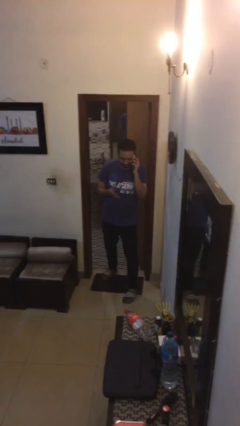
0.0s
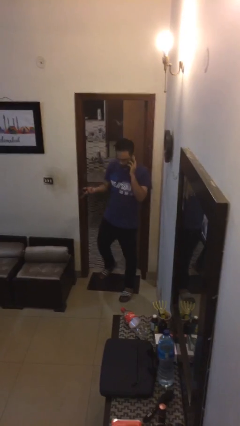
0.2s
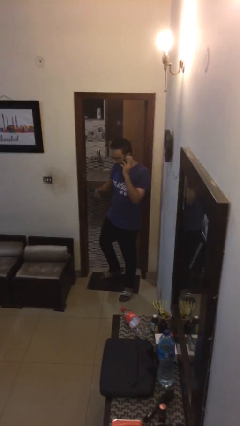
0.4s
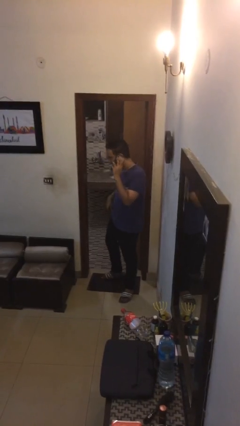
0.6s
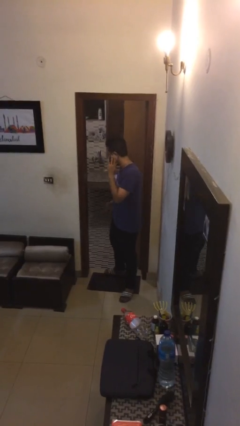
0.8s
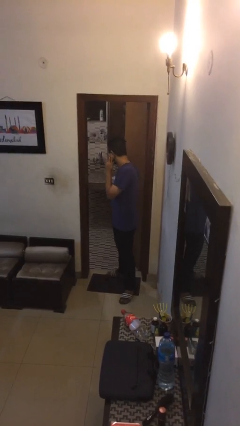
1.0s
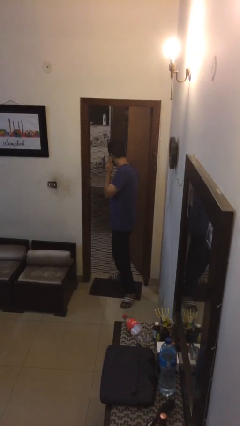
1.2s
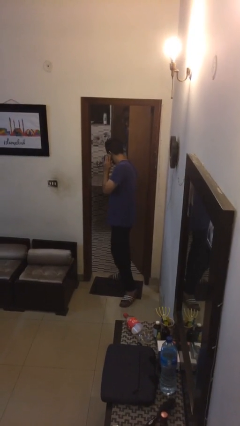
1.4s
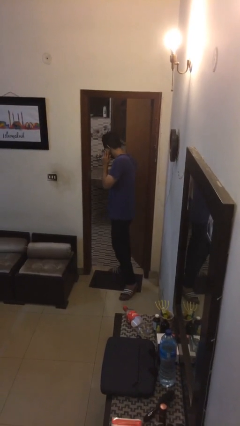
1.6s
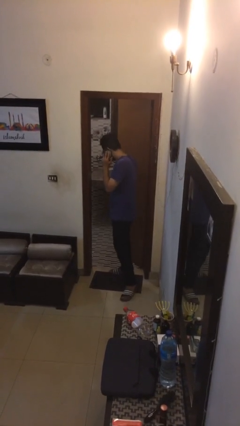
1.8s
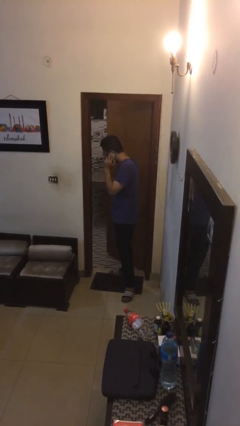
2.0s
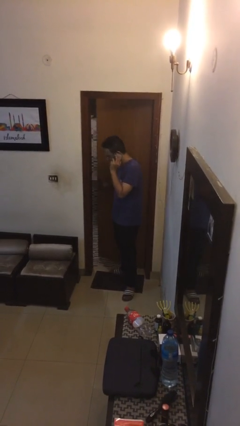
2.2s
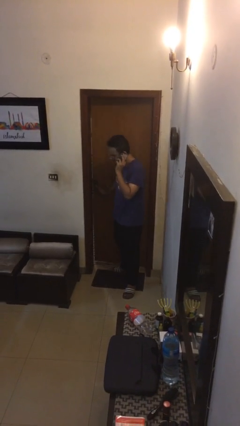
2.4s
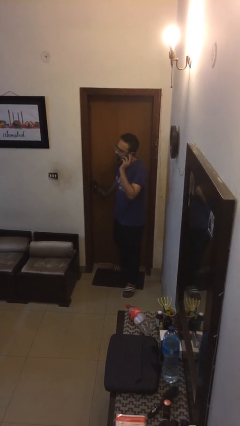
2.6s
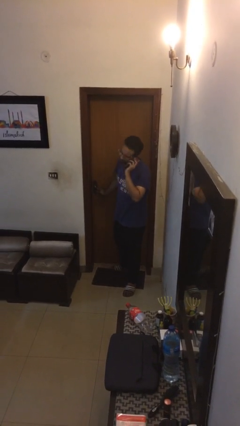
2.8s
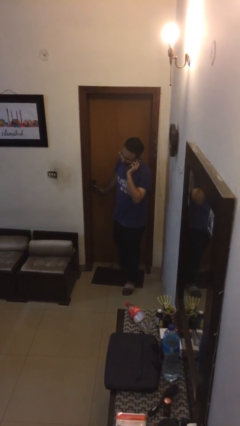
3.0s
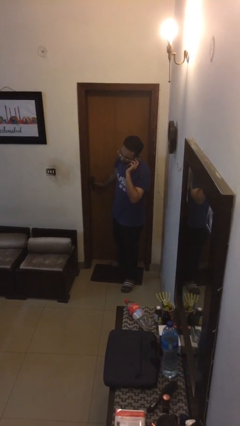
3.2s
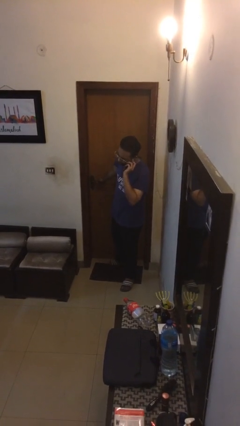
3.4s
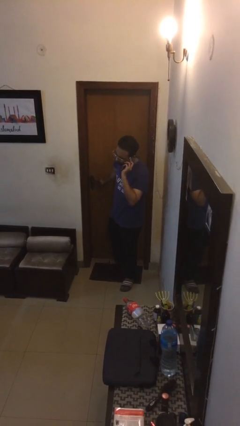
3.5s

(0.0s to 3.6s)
person closes facility door

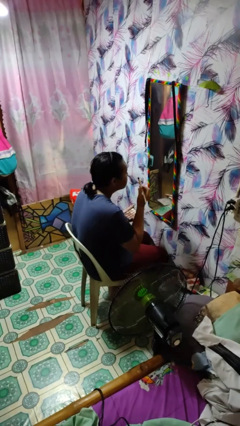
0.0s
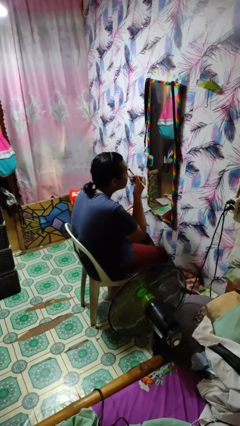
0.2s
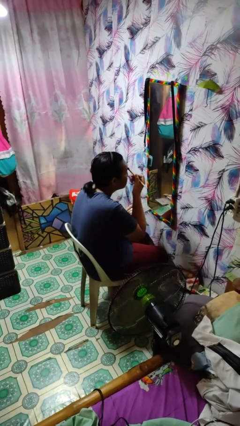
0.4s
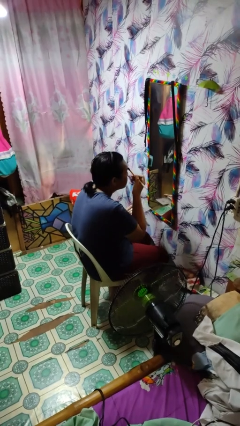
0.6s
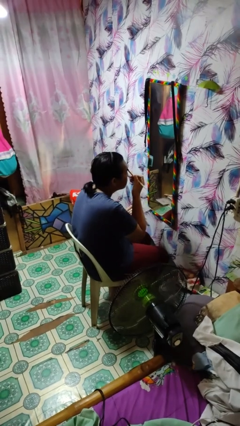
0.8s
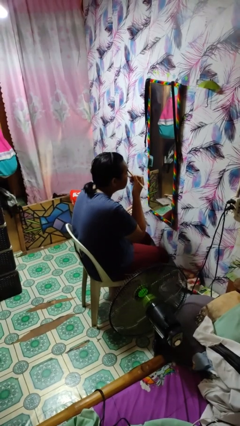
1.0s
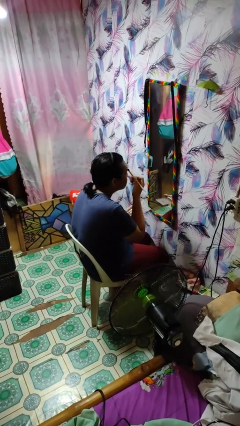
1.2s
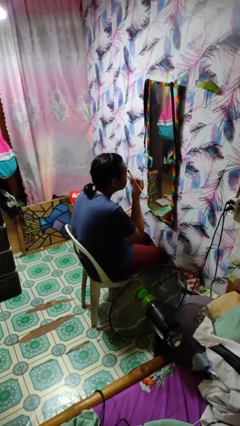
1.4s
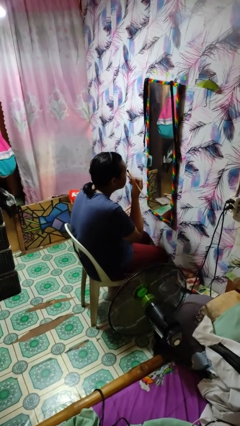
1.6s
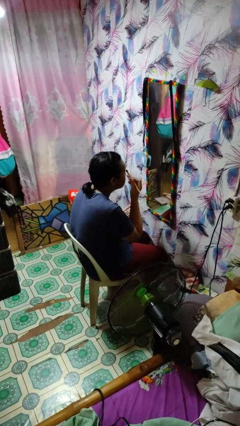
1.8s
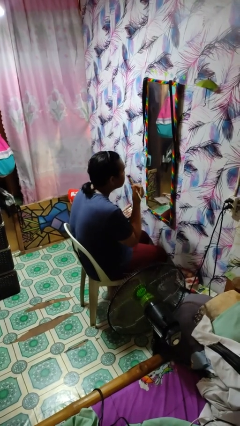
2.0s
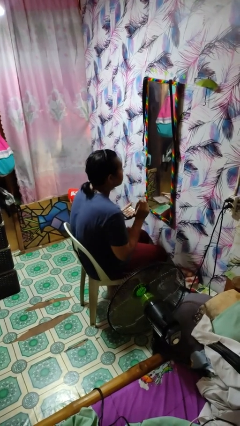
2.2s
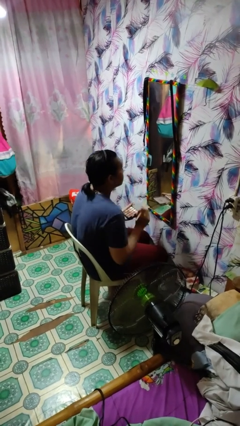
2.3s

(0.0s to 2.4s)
person applies eye makeup

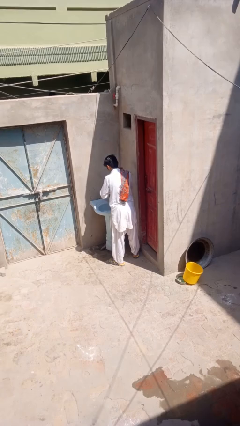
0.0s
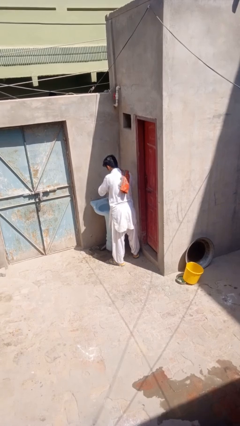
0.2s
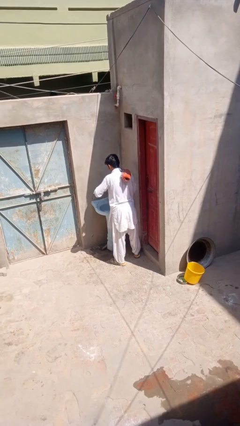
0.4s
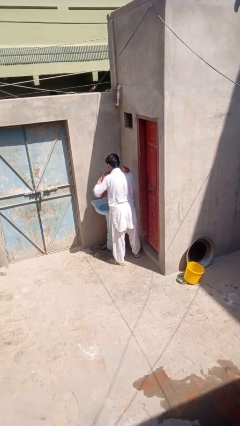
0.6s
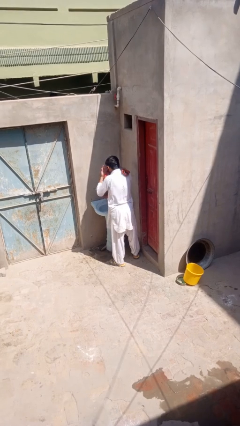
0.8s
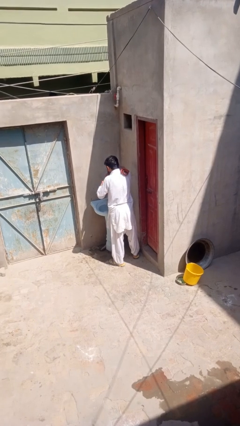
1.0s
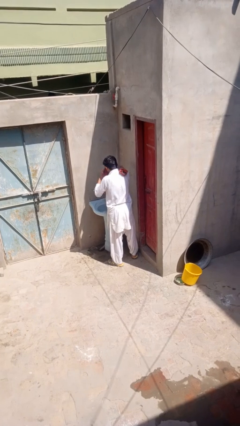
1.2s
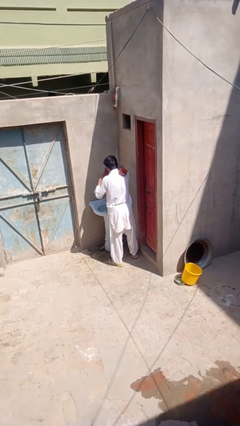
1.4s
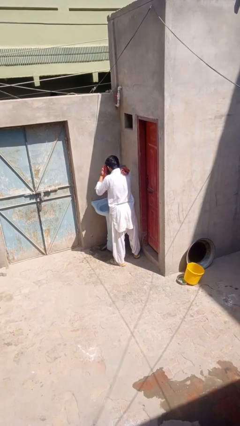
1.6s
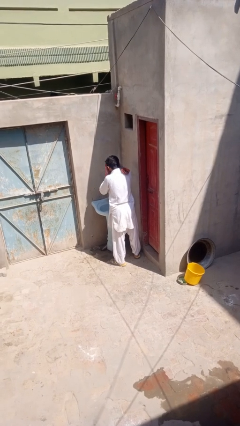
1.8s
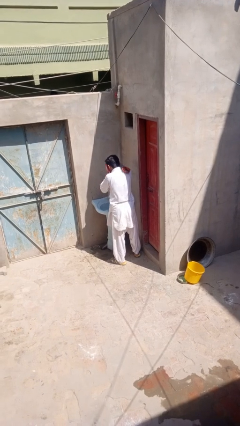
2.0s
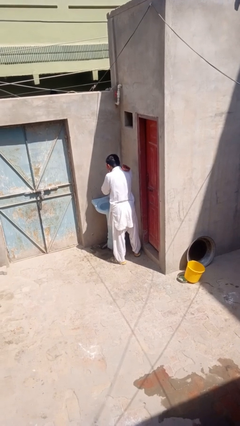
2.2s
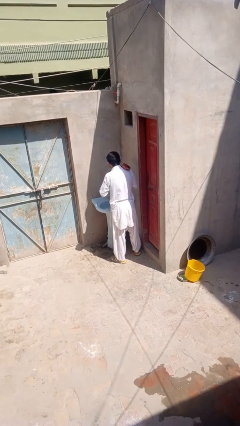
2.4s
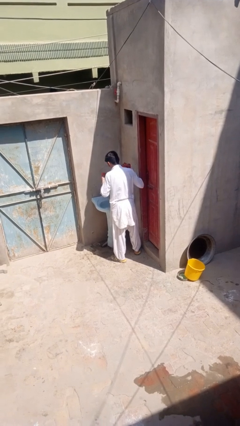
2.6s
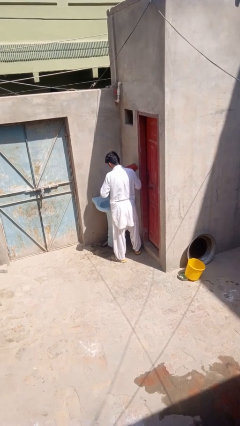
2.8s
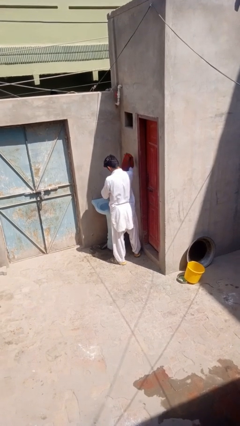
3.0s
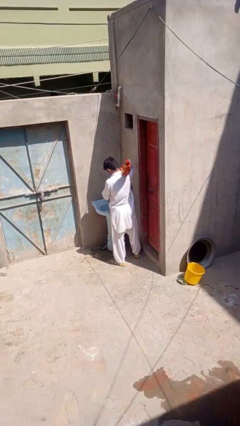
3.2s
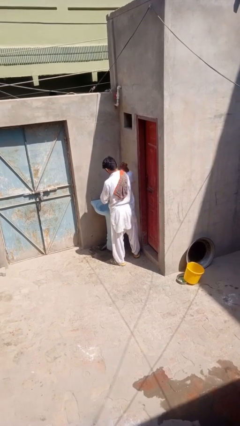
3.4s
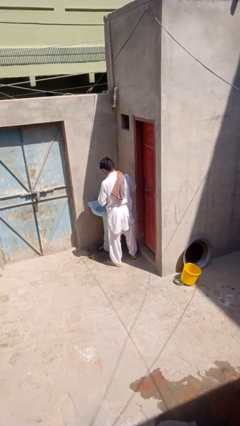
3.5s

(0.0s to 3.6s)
person dries face with towel

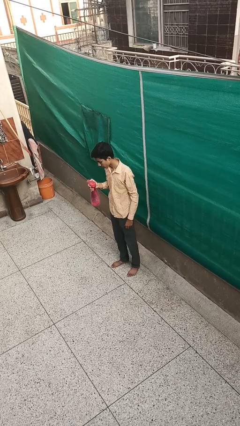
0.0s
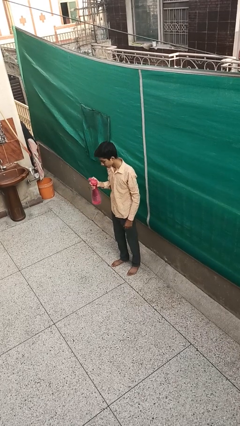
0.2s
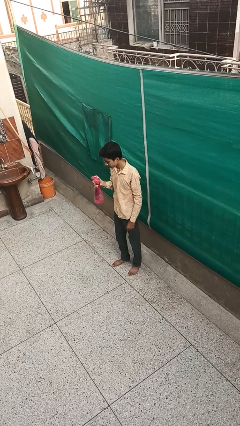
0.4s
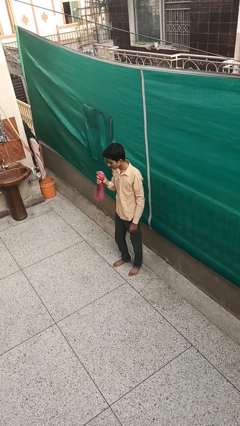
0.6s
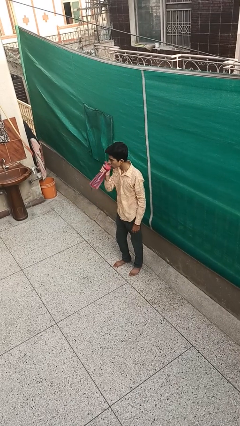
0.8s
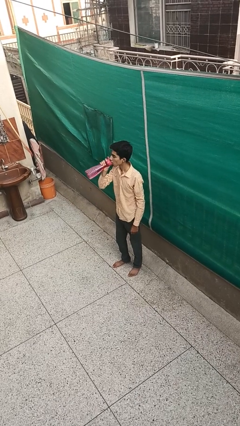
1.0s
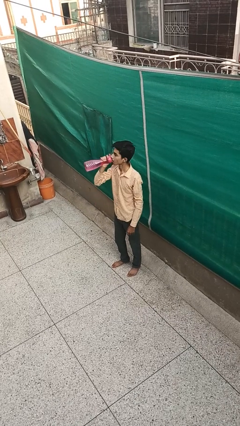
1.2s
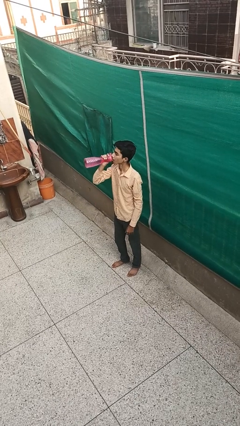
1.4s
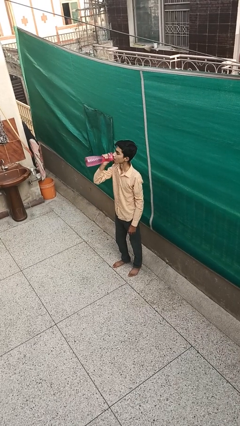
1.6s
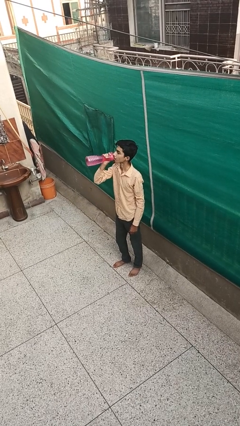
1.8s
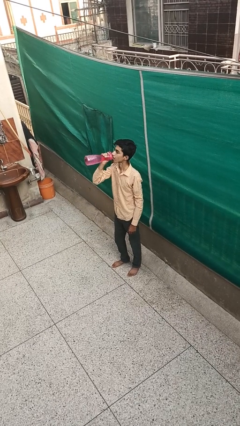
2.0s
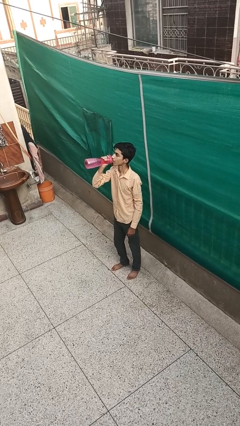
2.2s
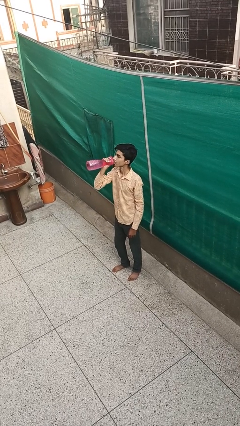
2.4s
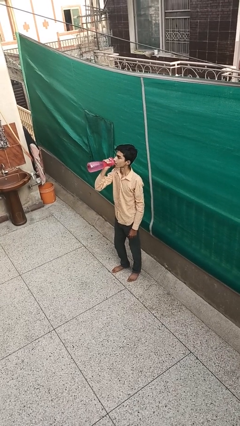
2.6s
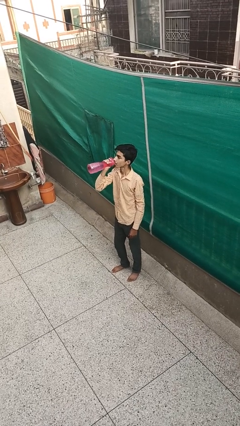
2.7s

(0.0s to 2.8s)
person drinks from bottle

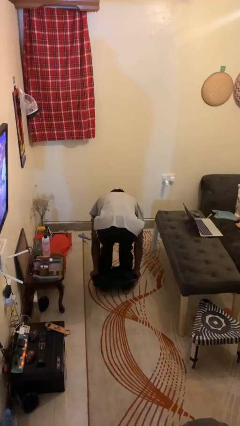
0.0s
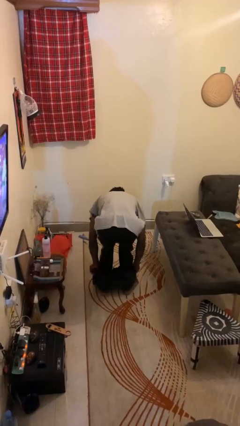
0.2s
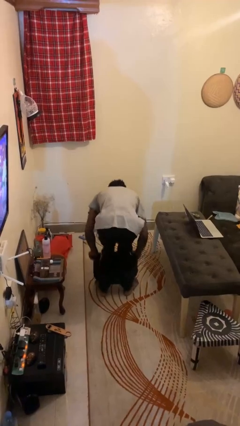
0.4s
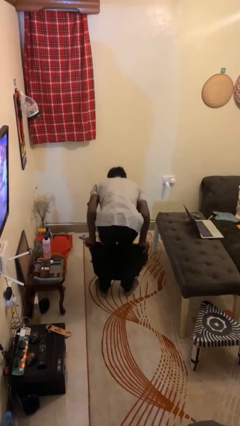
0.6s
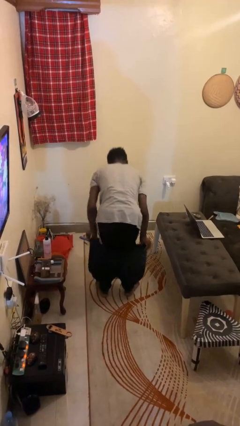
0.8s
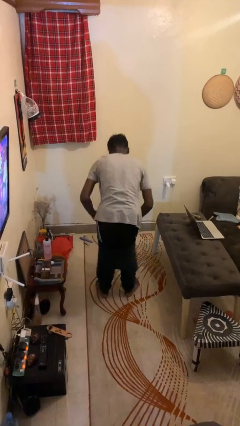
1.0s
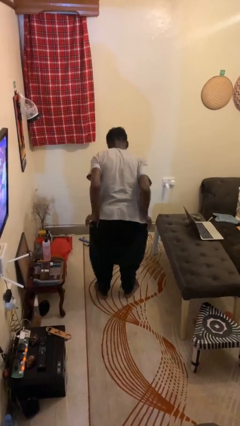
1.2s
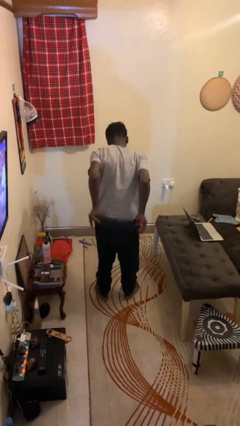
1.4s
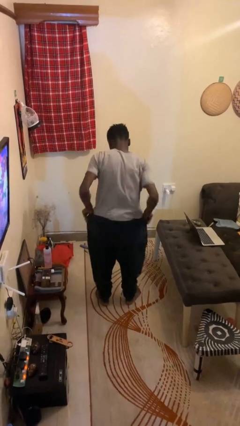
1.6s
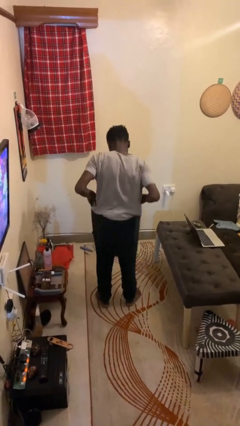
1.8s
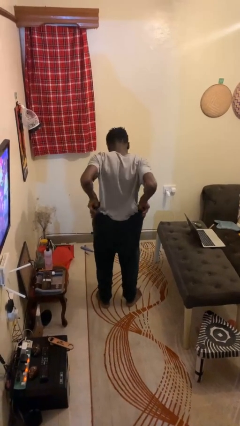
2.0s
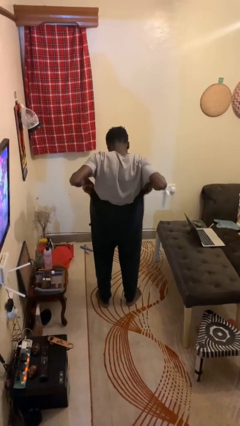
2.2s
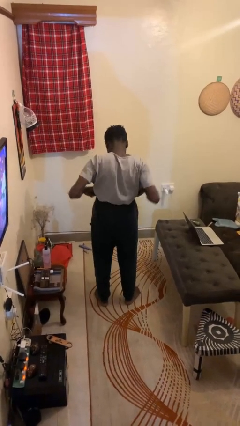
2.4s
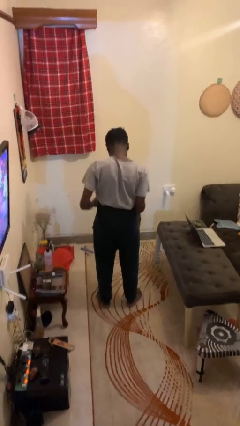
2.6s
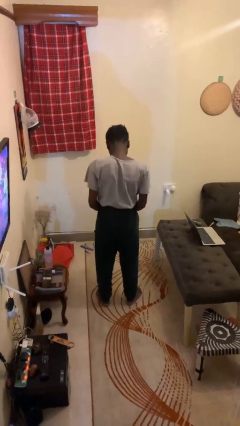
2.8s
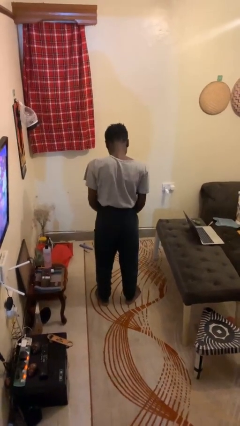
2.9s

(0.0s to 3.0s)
person puts on pants

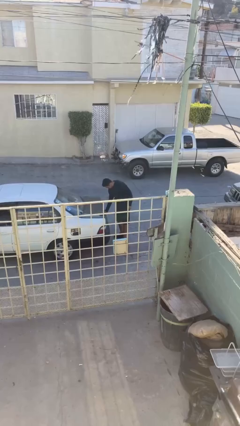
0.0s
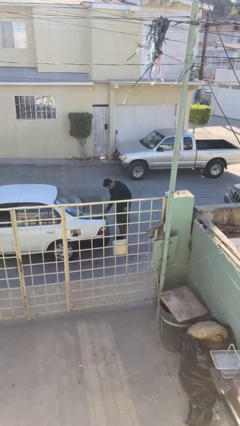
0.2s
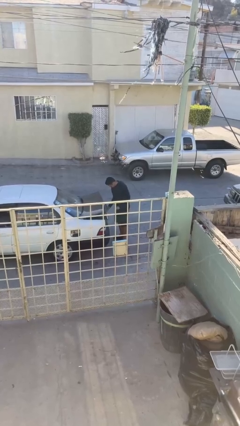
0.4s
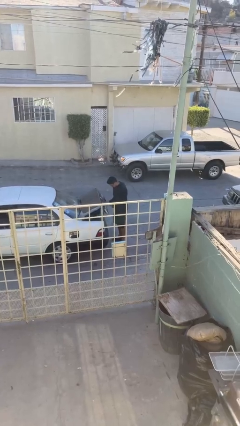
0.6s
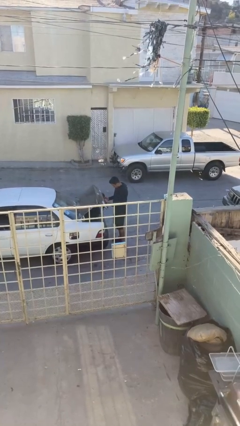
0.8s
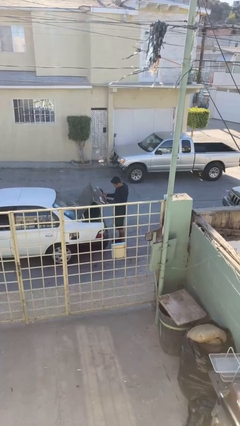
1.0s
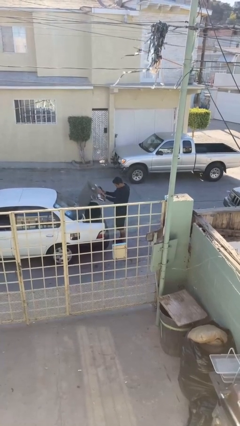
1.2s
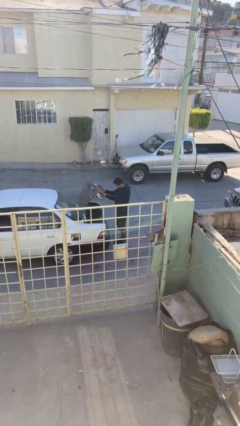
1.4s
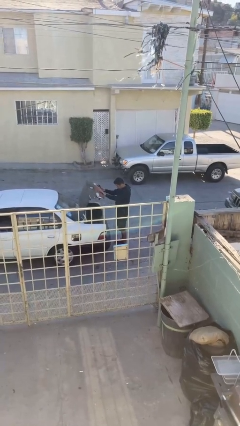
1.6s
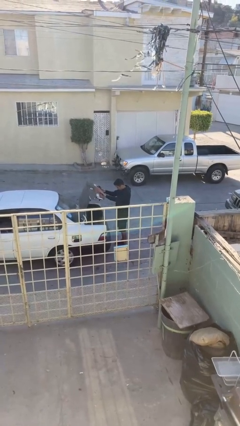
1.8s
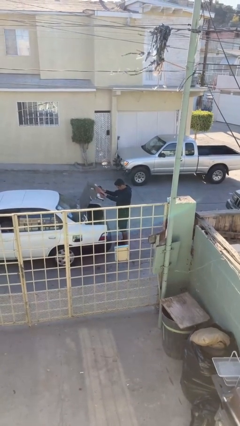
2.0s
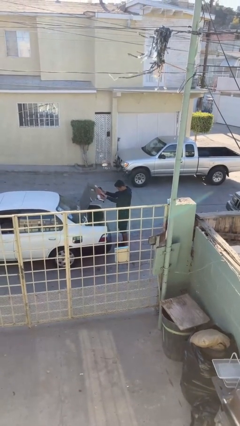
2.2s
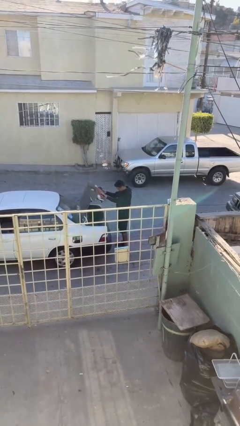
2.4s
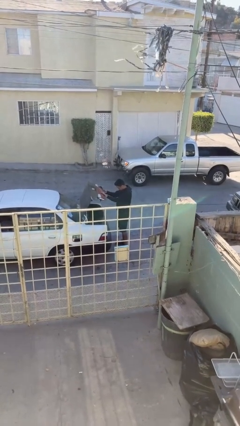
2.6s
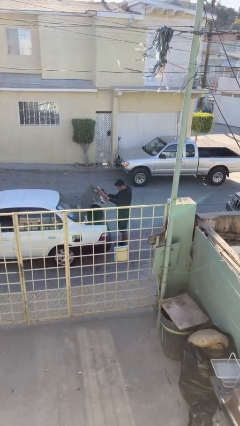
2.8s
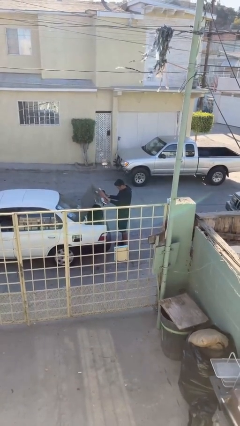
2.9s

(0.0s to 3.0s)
person opens car trunk
